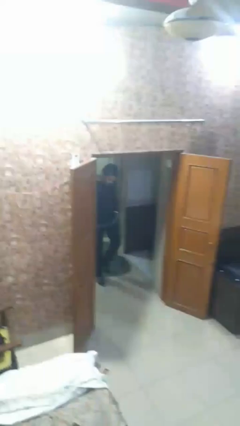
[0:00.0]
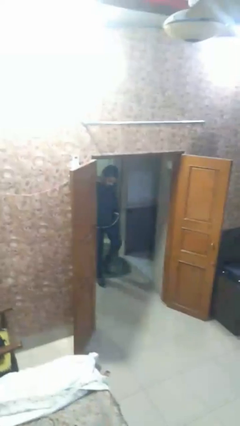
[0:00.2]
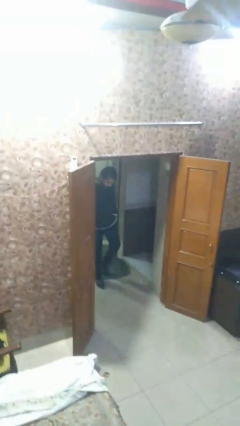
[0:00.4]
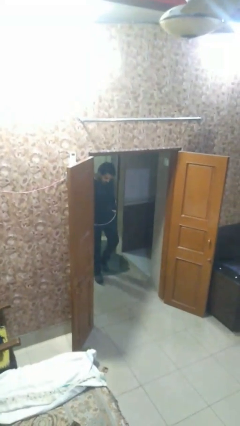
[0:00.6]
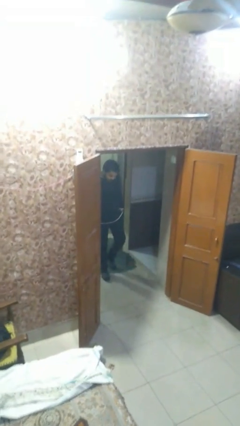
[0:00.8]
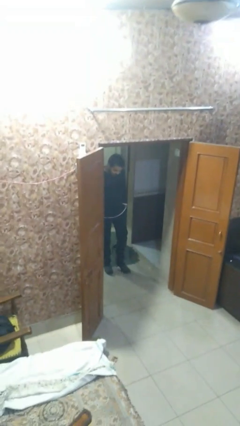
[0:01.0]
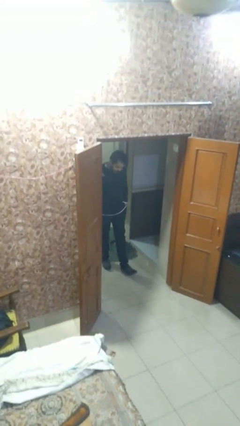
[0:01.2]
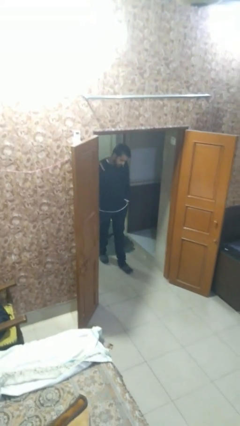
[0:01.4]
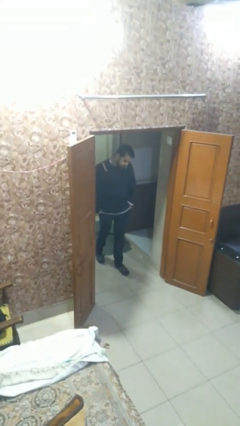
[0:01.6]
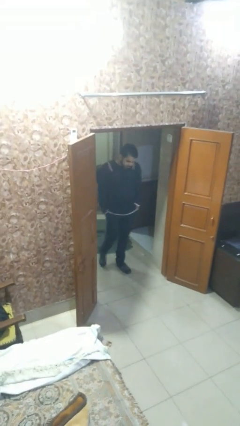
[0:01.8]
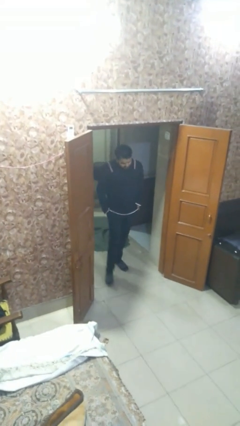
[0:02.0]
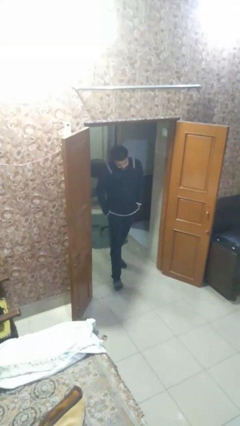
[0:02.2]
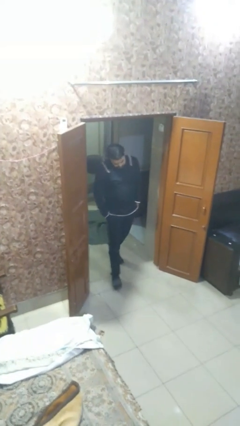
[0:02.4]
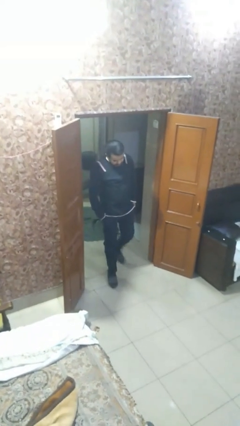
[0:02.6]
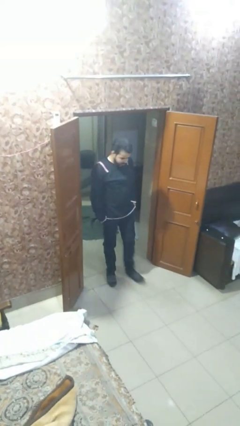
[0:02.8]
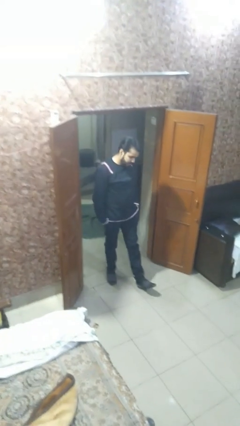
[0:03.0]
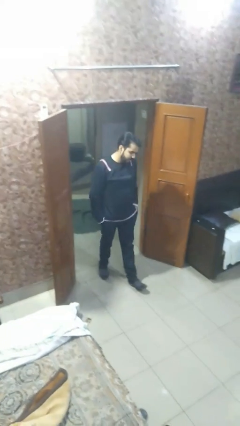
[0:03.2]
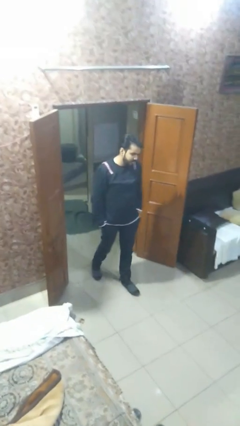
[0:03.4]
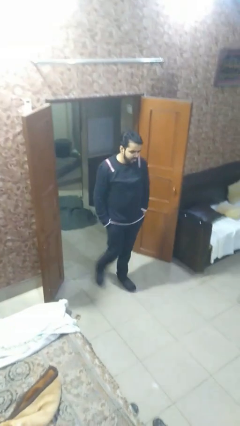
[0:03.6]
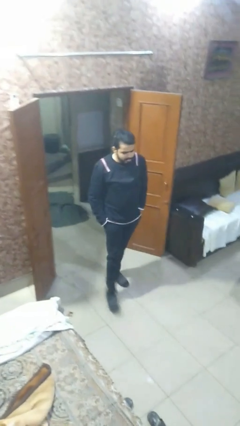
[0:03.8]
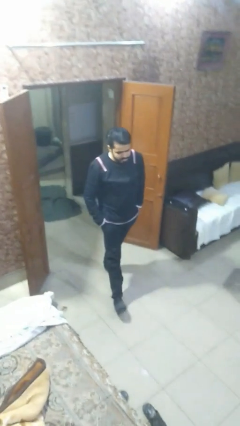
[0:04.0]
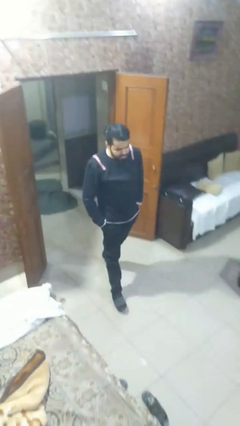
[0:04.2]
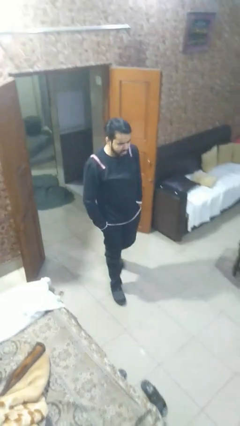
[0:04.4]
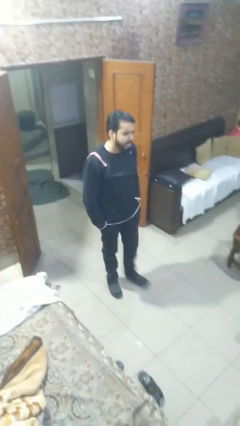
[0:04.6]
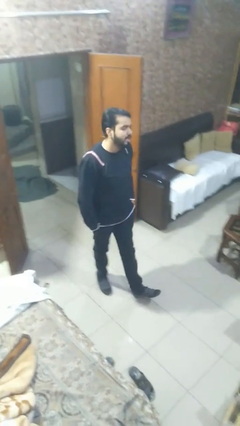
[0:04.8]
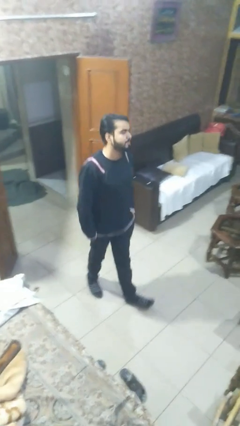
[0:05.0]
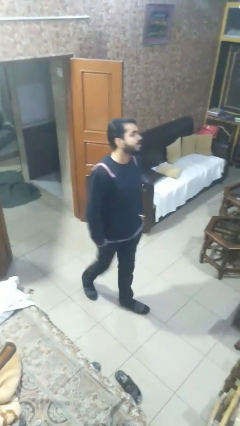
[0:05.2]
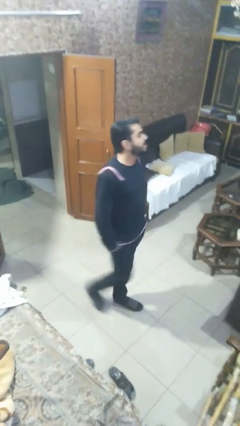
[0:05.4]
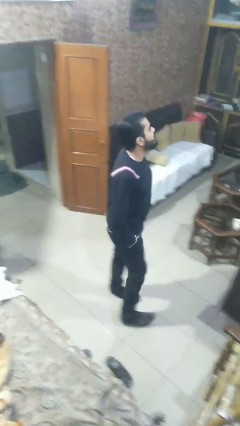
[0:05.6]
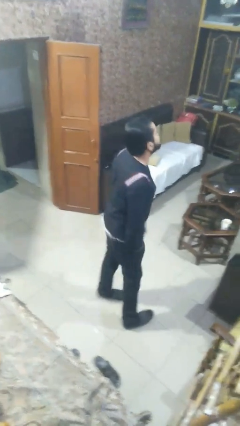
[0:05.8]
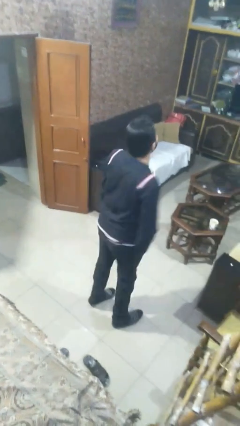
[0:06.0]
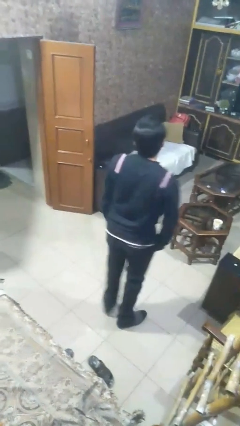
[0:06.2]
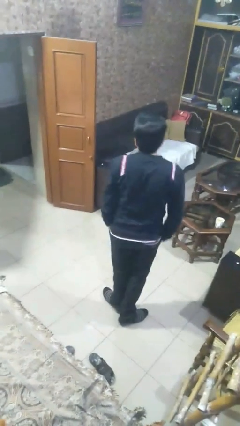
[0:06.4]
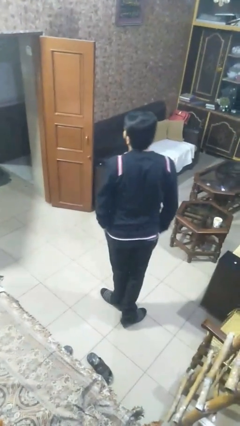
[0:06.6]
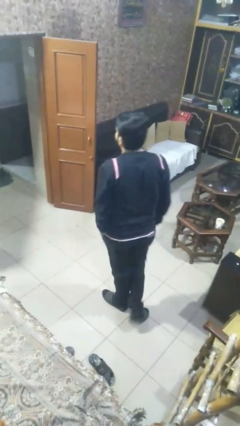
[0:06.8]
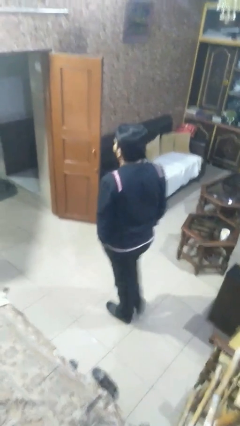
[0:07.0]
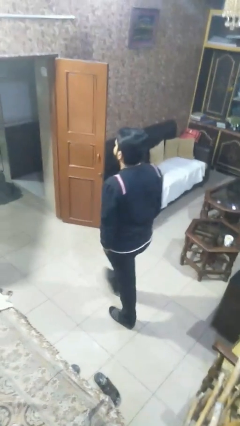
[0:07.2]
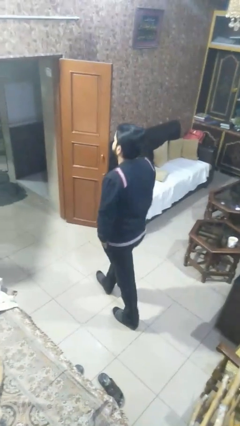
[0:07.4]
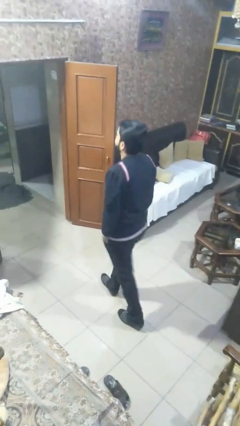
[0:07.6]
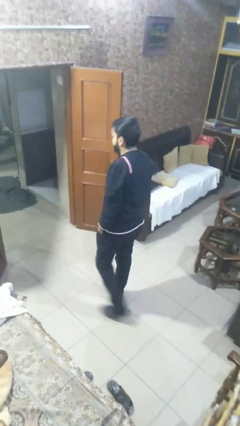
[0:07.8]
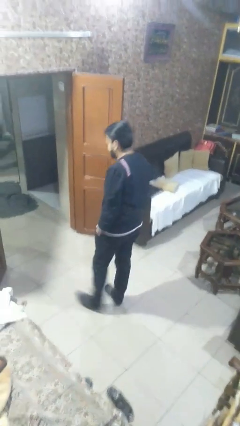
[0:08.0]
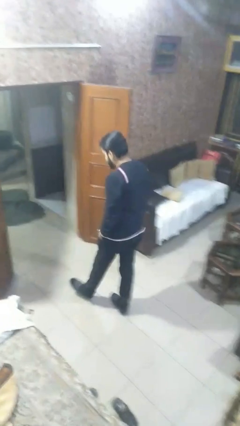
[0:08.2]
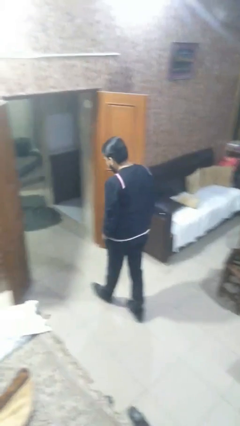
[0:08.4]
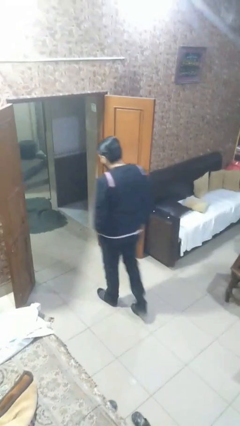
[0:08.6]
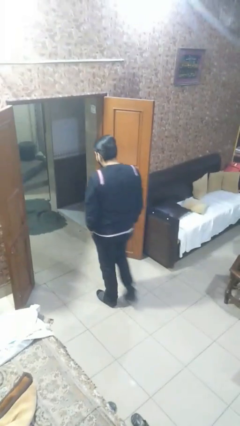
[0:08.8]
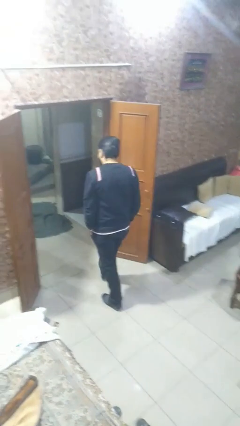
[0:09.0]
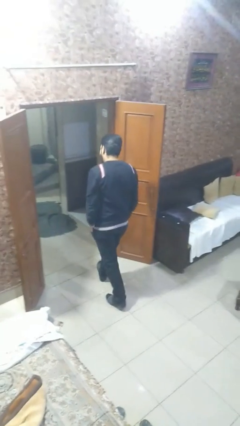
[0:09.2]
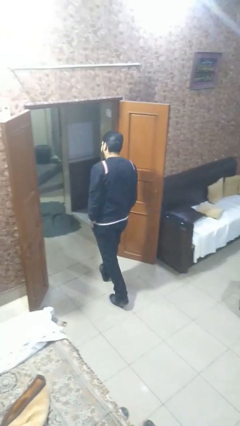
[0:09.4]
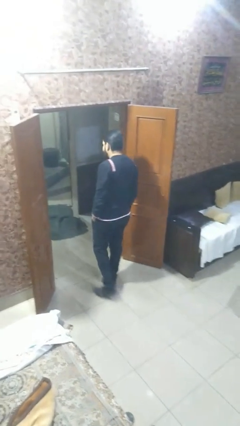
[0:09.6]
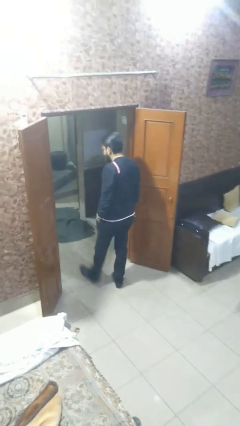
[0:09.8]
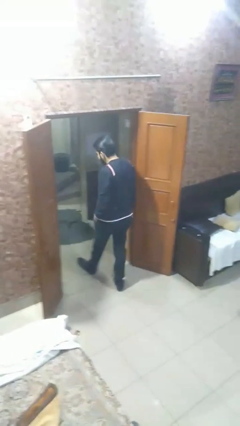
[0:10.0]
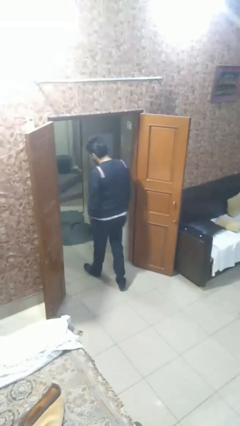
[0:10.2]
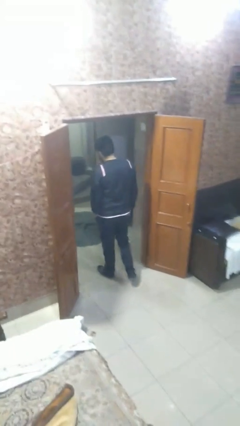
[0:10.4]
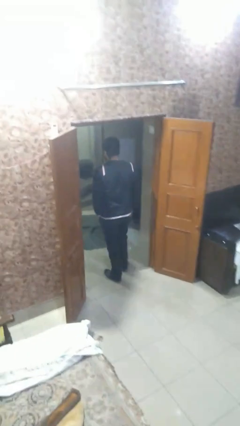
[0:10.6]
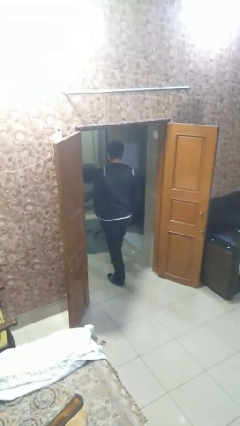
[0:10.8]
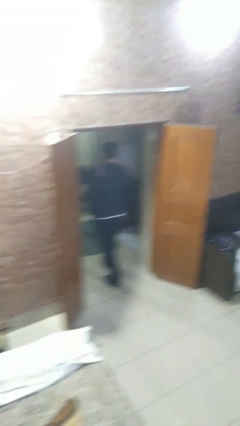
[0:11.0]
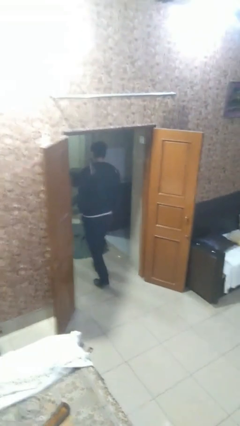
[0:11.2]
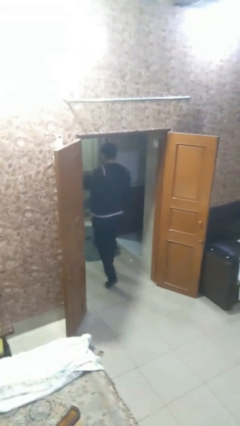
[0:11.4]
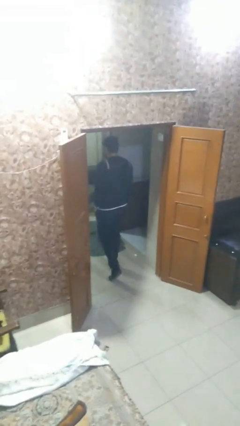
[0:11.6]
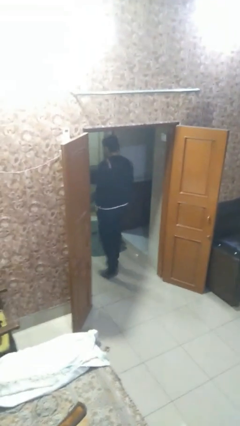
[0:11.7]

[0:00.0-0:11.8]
person walks

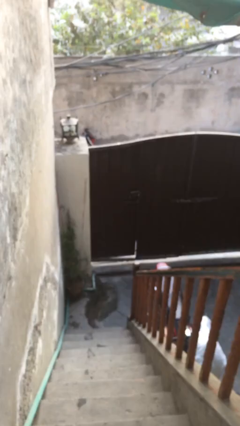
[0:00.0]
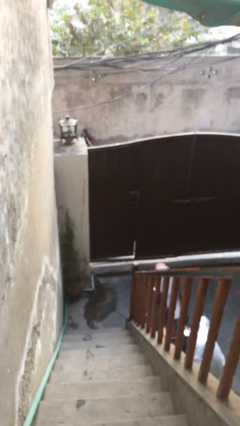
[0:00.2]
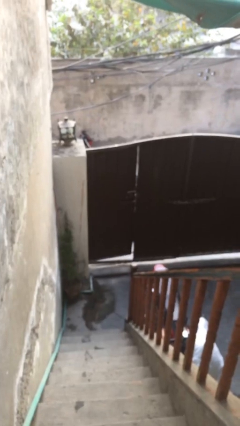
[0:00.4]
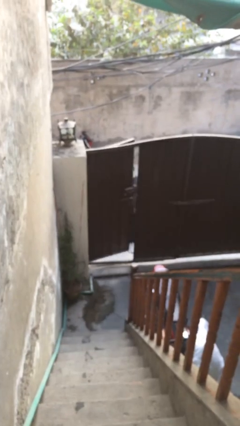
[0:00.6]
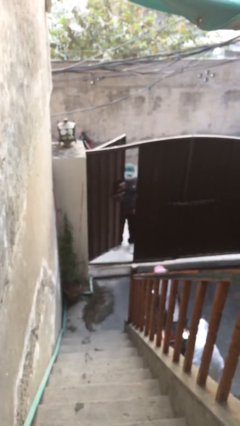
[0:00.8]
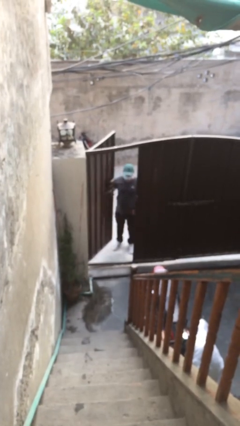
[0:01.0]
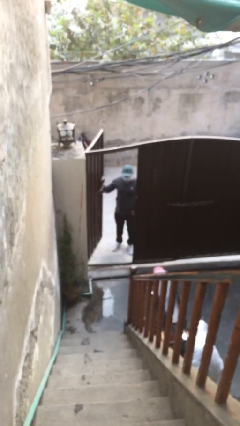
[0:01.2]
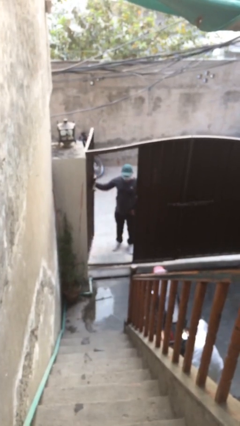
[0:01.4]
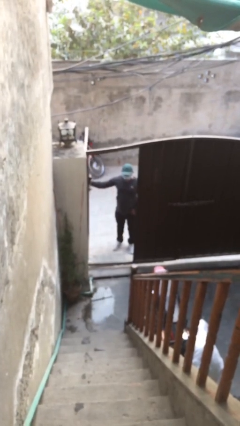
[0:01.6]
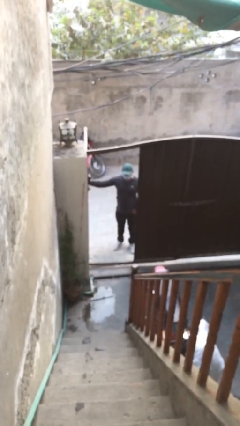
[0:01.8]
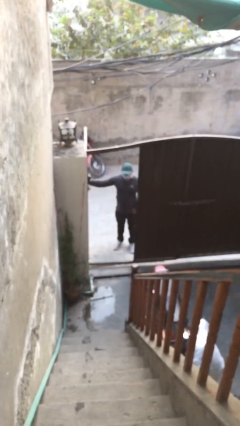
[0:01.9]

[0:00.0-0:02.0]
person opens facility door

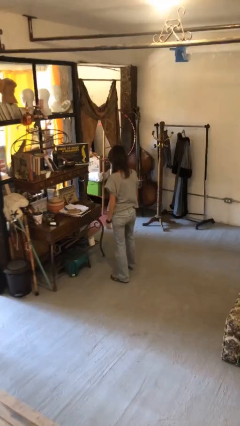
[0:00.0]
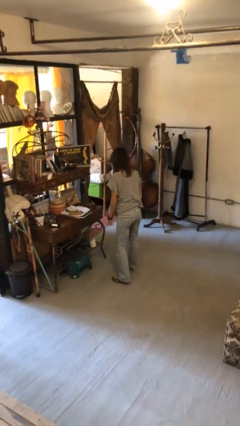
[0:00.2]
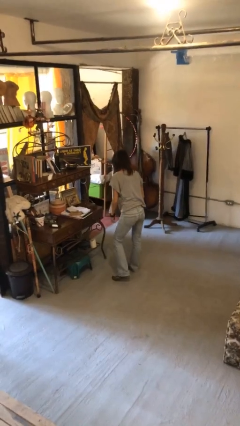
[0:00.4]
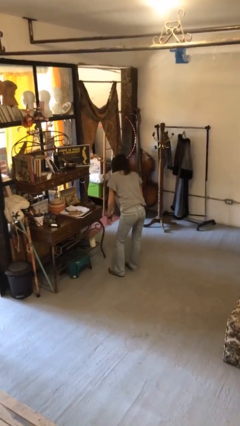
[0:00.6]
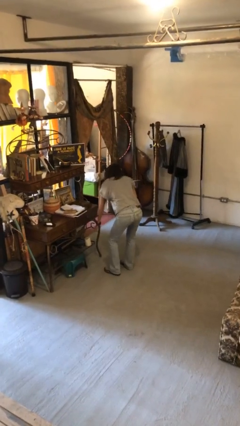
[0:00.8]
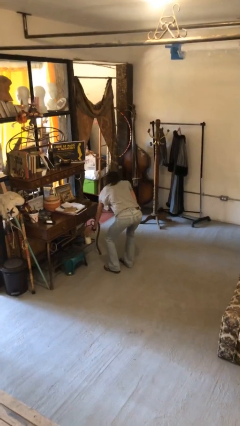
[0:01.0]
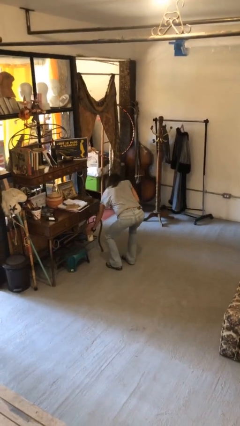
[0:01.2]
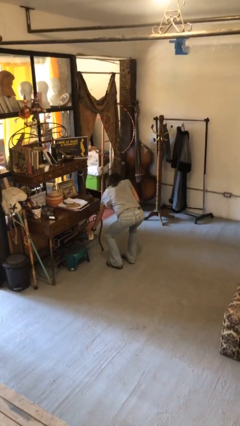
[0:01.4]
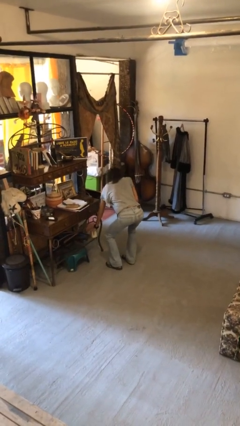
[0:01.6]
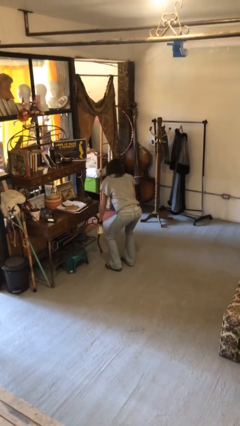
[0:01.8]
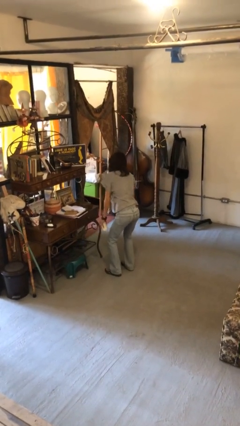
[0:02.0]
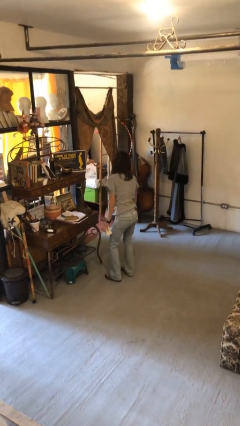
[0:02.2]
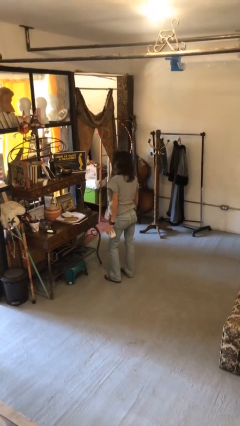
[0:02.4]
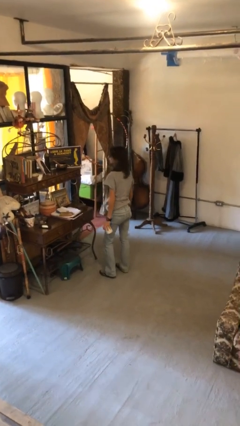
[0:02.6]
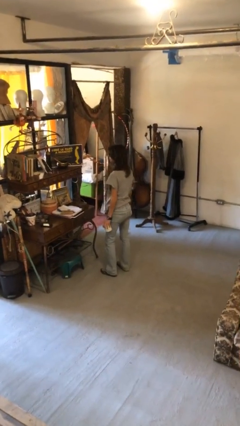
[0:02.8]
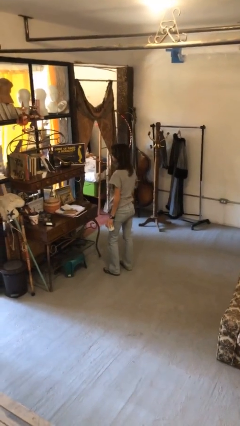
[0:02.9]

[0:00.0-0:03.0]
person picks up object from cabinet

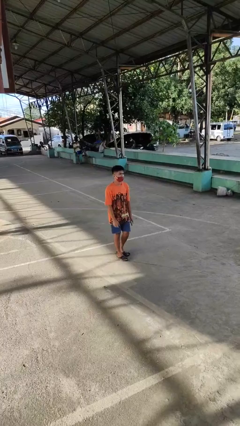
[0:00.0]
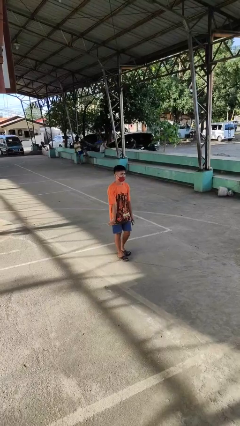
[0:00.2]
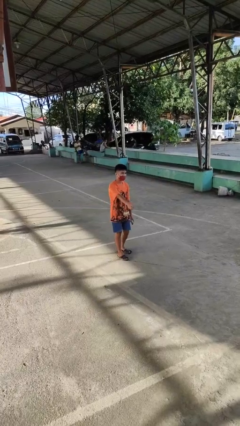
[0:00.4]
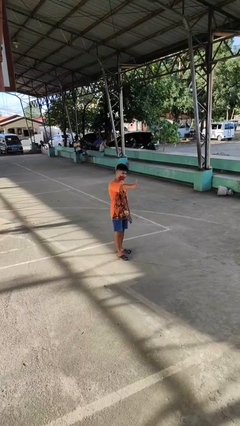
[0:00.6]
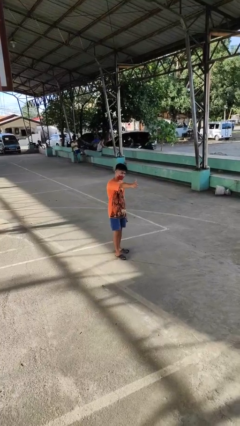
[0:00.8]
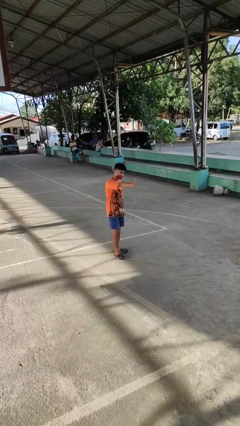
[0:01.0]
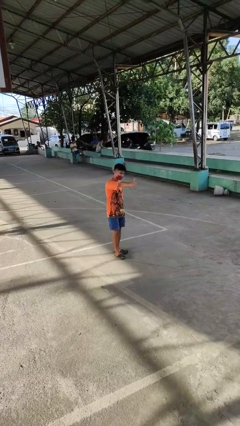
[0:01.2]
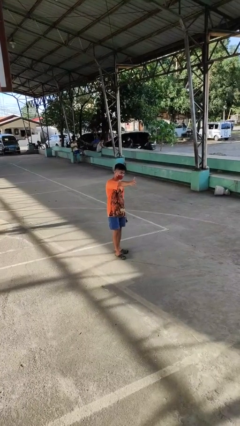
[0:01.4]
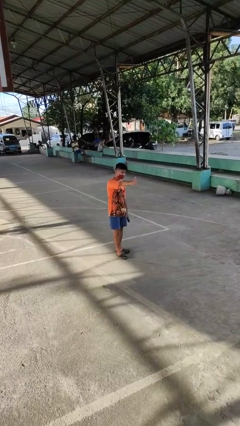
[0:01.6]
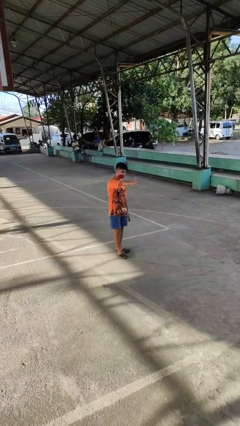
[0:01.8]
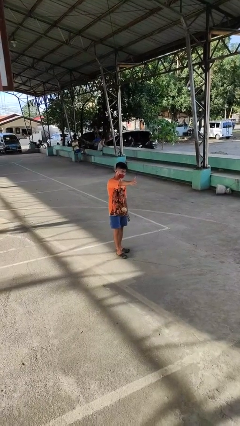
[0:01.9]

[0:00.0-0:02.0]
person gestures thumbs up
